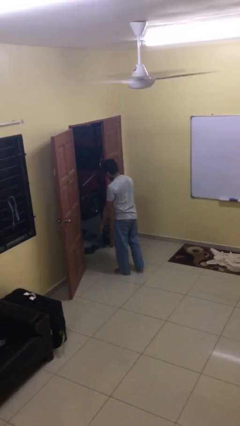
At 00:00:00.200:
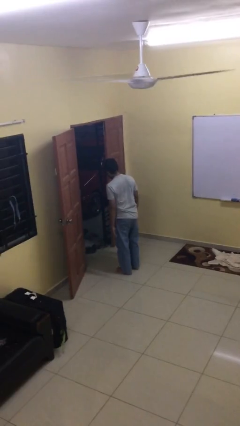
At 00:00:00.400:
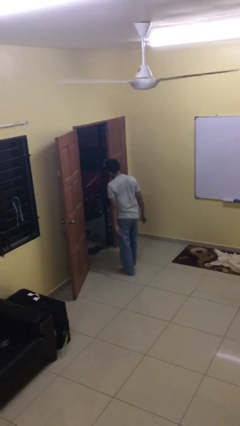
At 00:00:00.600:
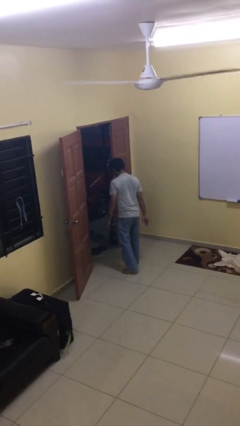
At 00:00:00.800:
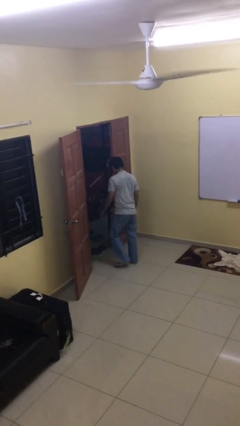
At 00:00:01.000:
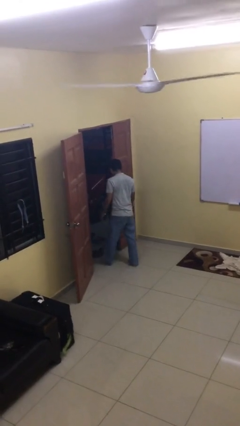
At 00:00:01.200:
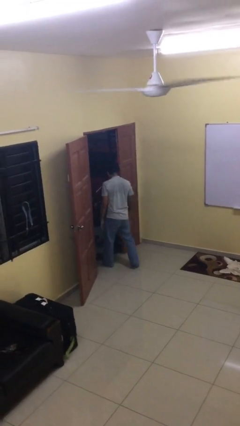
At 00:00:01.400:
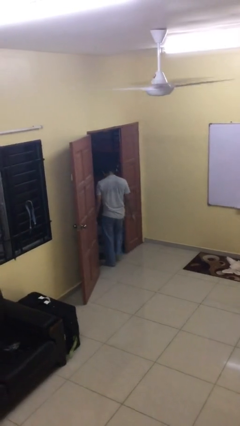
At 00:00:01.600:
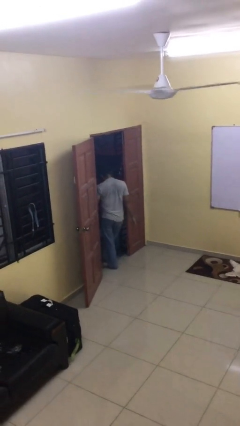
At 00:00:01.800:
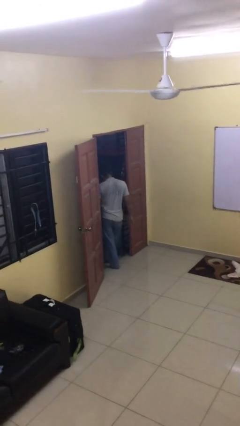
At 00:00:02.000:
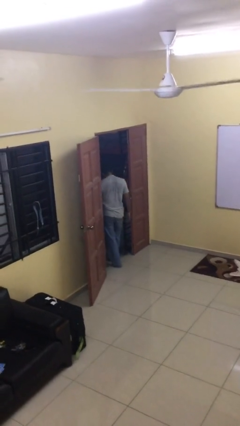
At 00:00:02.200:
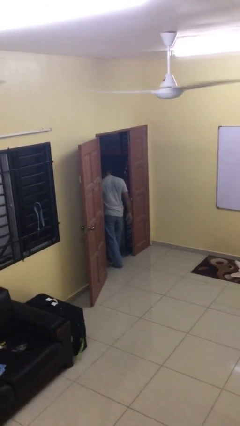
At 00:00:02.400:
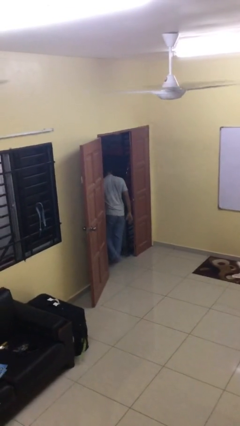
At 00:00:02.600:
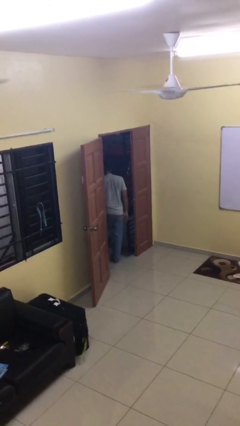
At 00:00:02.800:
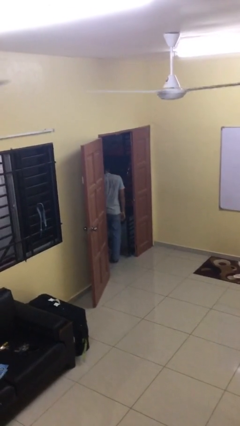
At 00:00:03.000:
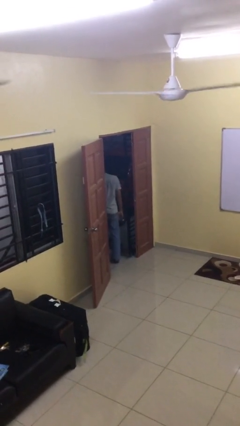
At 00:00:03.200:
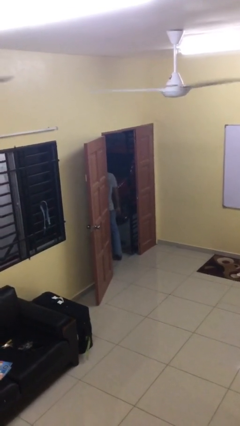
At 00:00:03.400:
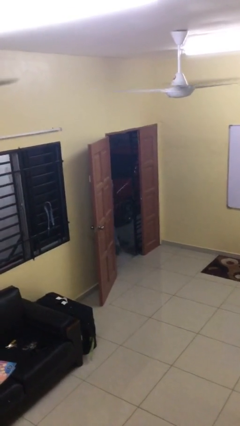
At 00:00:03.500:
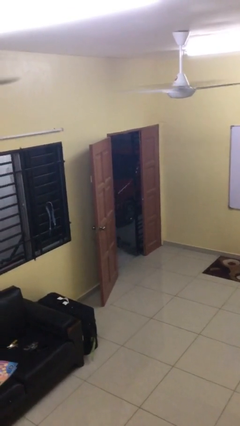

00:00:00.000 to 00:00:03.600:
person exits scene through structure

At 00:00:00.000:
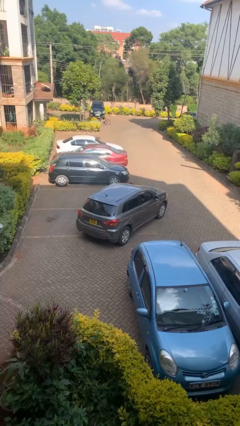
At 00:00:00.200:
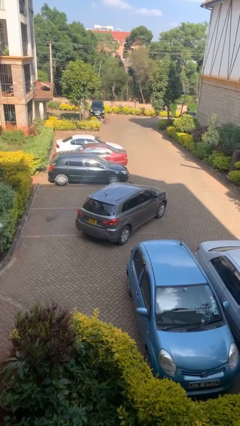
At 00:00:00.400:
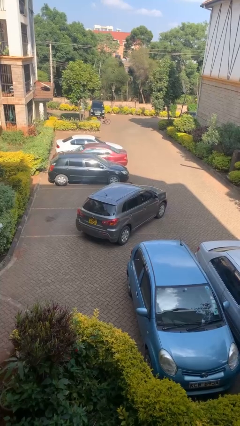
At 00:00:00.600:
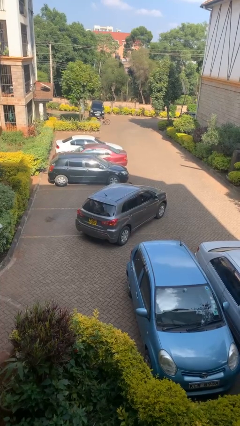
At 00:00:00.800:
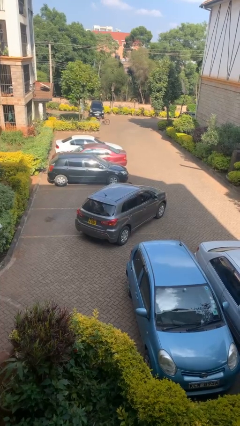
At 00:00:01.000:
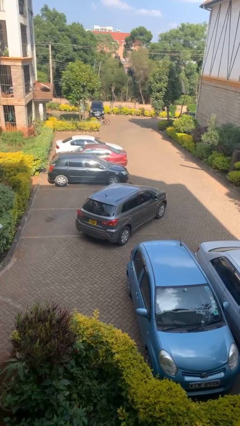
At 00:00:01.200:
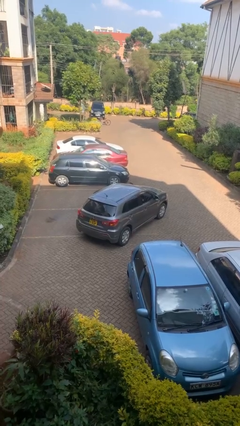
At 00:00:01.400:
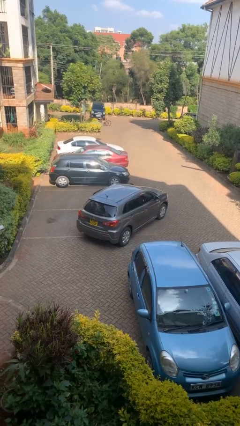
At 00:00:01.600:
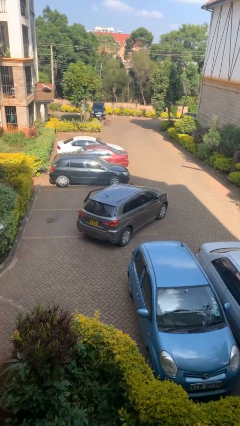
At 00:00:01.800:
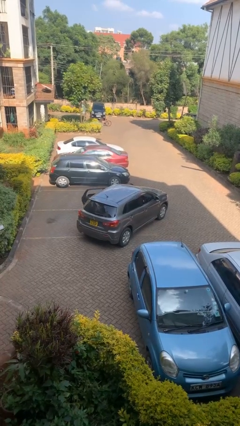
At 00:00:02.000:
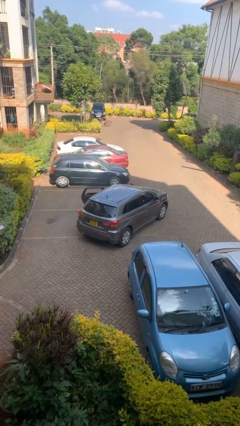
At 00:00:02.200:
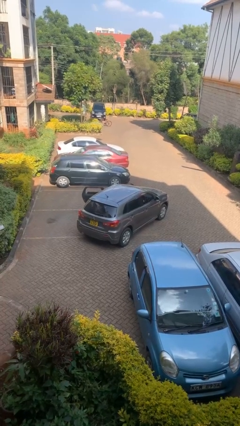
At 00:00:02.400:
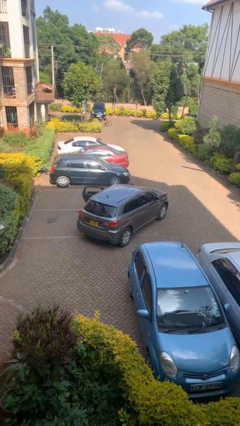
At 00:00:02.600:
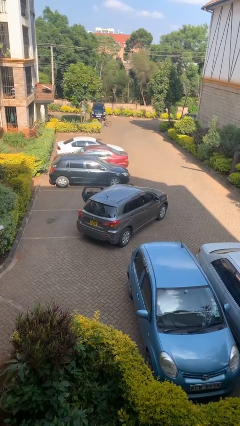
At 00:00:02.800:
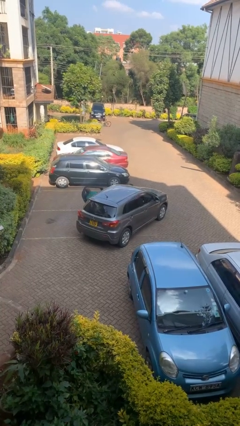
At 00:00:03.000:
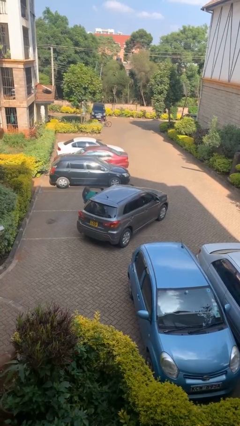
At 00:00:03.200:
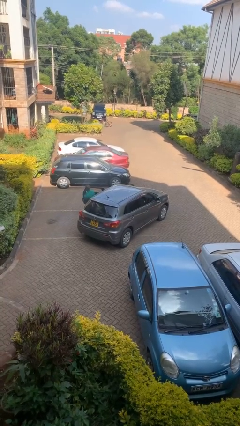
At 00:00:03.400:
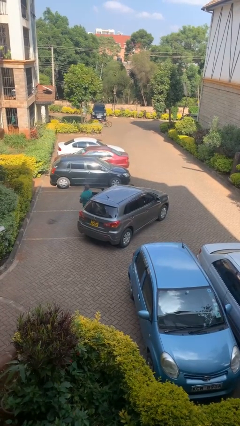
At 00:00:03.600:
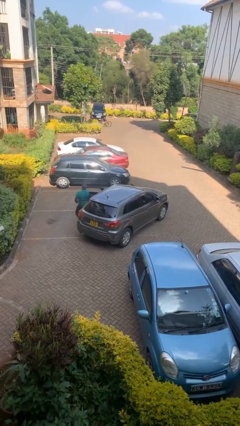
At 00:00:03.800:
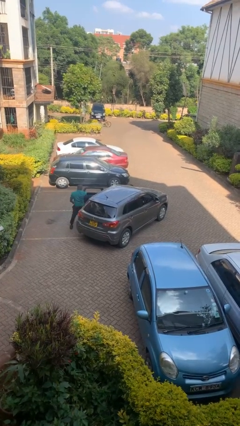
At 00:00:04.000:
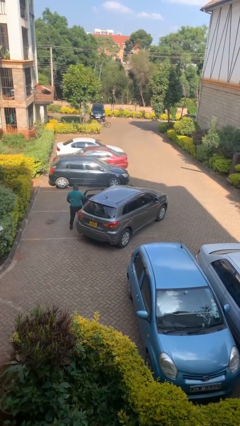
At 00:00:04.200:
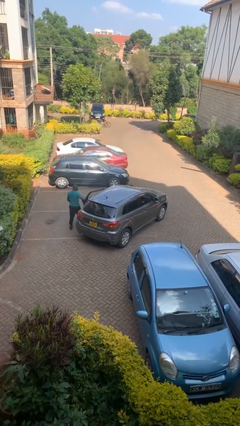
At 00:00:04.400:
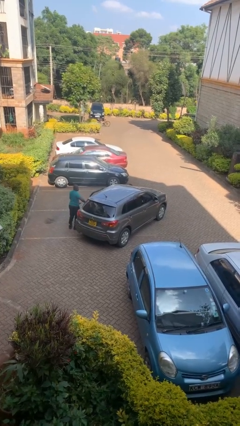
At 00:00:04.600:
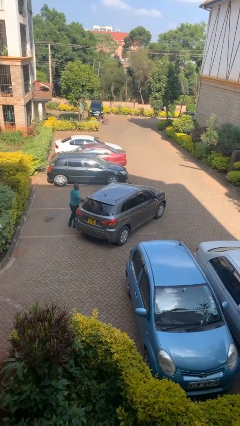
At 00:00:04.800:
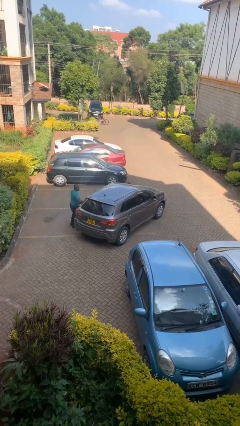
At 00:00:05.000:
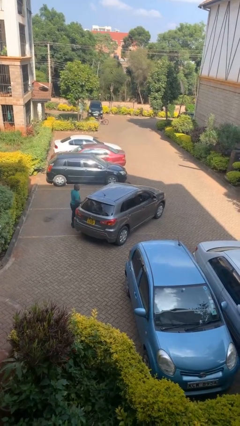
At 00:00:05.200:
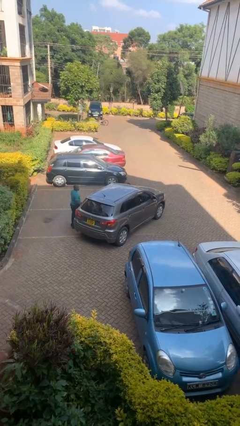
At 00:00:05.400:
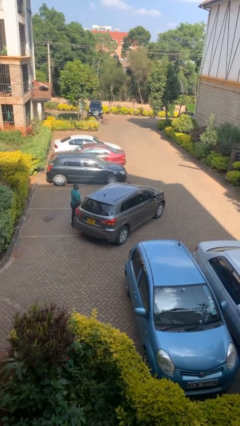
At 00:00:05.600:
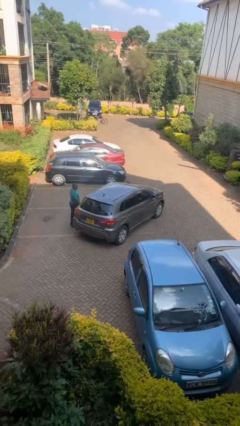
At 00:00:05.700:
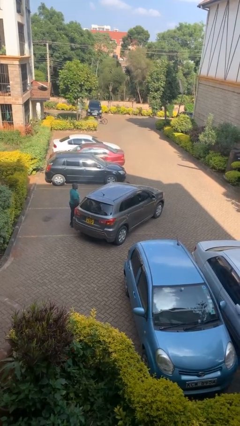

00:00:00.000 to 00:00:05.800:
car drops off person

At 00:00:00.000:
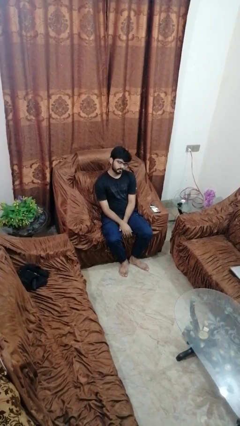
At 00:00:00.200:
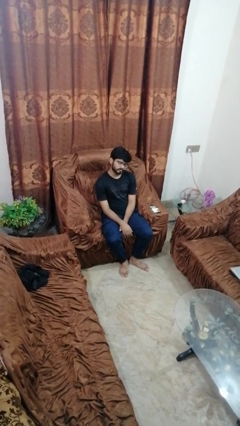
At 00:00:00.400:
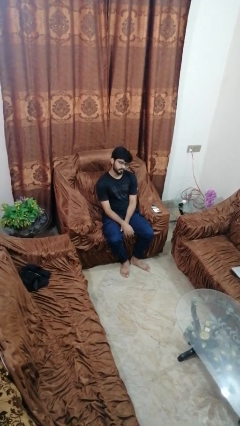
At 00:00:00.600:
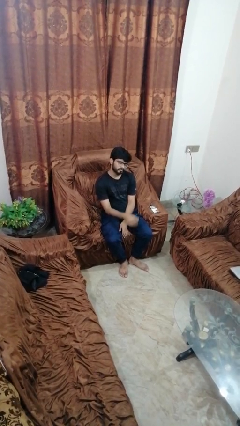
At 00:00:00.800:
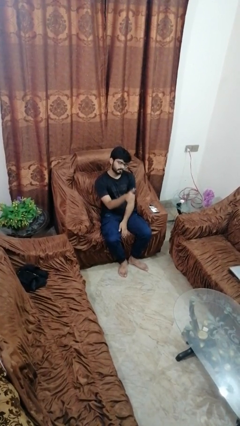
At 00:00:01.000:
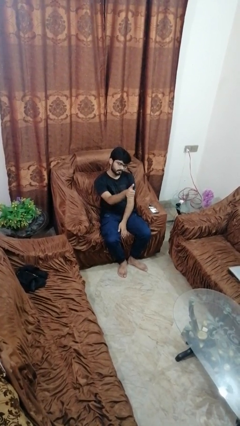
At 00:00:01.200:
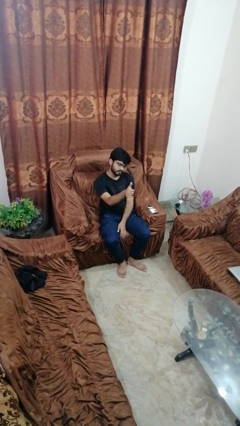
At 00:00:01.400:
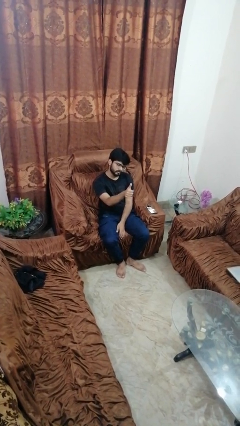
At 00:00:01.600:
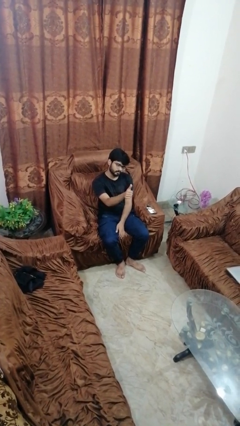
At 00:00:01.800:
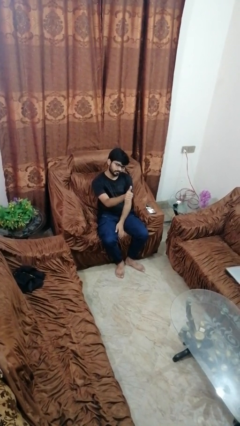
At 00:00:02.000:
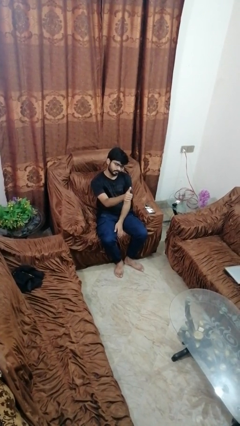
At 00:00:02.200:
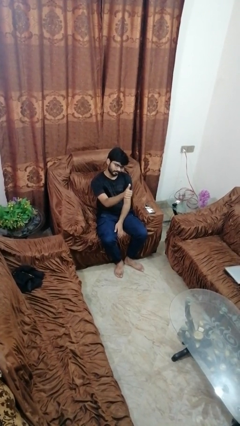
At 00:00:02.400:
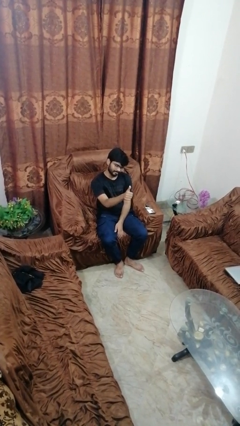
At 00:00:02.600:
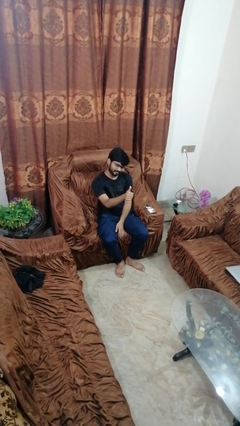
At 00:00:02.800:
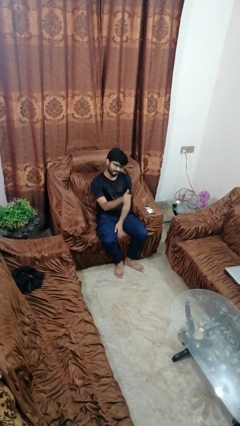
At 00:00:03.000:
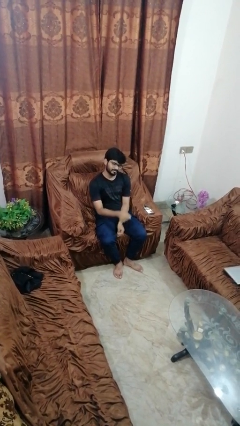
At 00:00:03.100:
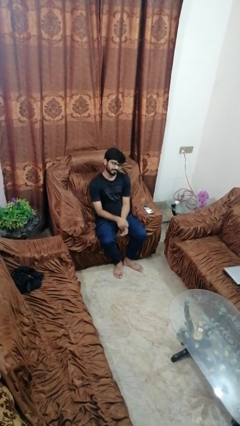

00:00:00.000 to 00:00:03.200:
person gestures thumbs up

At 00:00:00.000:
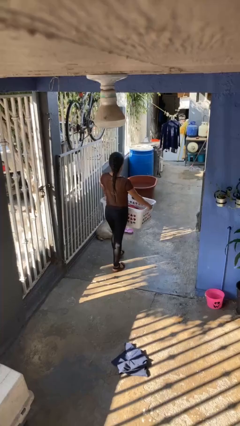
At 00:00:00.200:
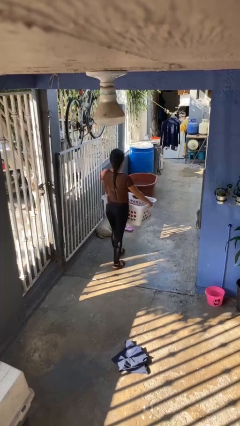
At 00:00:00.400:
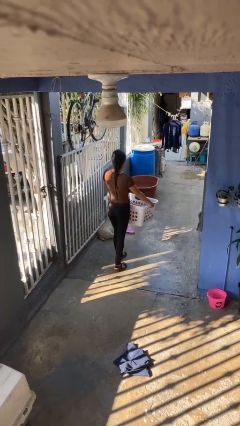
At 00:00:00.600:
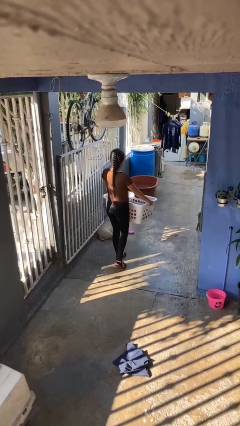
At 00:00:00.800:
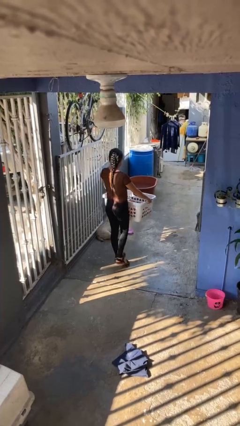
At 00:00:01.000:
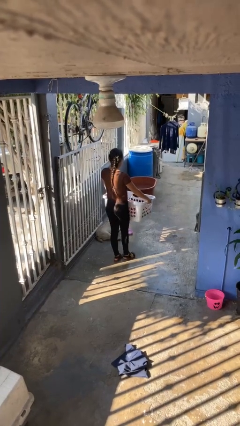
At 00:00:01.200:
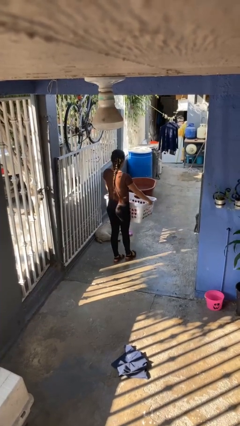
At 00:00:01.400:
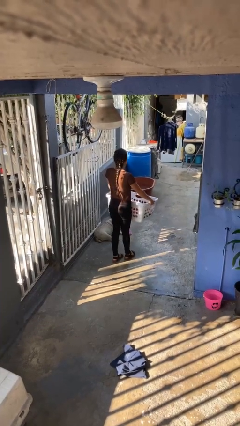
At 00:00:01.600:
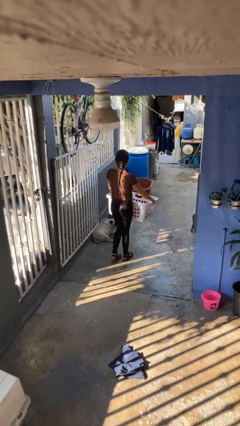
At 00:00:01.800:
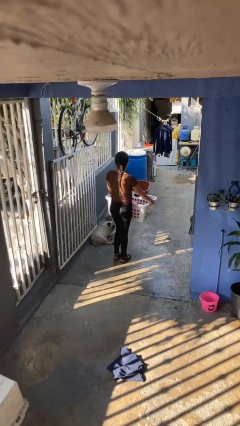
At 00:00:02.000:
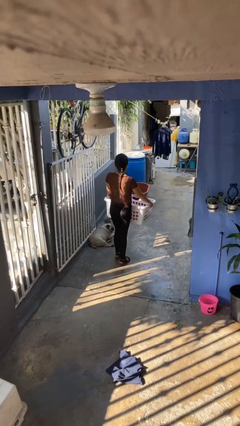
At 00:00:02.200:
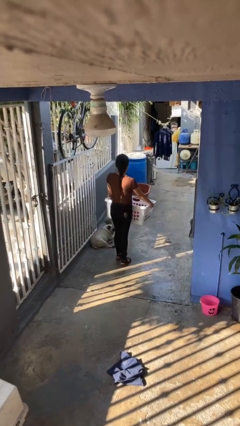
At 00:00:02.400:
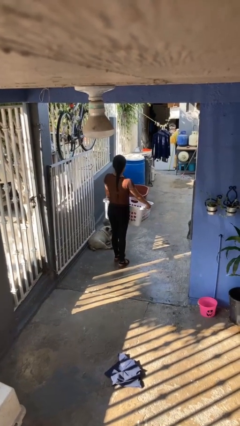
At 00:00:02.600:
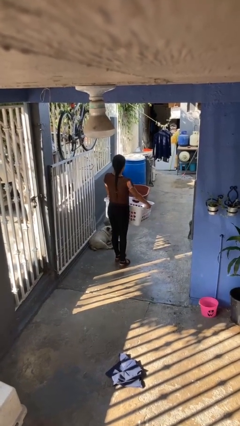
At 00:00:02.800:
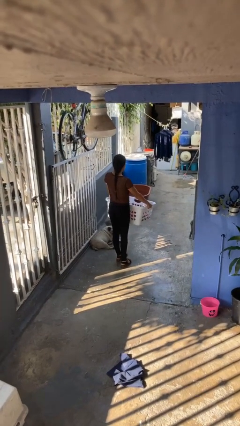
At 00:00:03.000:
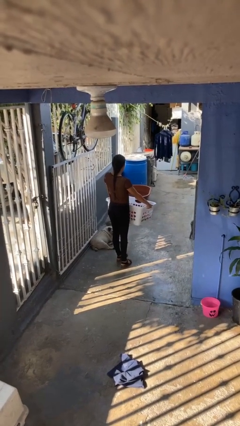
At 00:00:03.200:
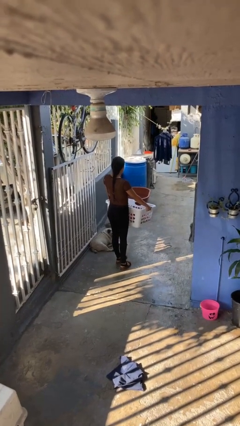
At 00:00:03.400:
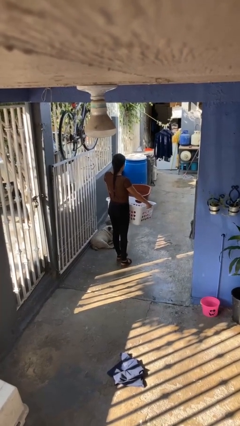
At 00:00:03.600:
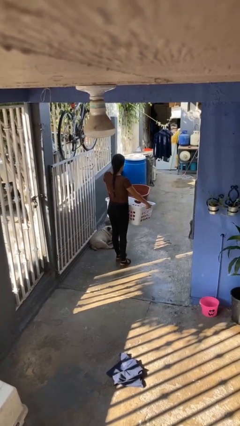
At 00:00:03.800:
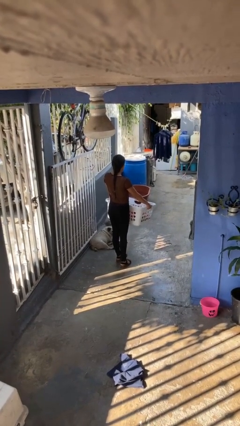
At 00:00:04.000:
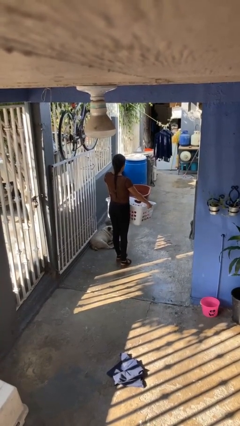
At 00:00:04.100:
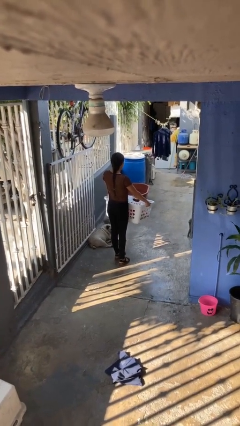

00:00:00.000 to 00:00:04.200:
person carries laundry basket

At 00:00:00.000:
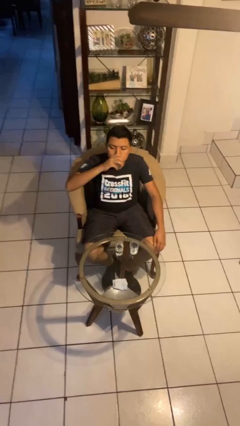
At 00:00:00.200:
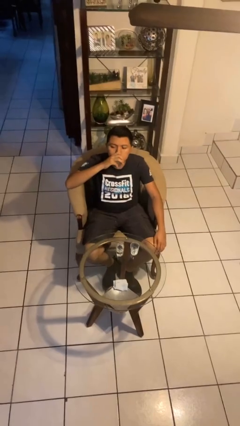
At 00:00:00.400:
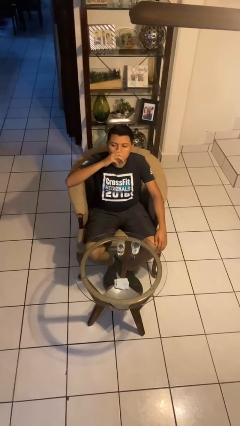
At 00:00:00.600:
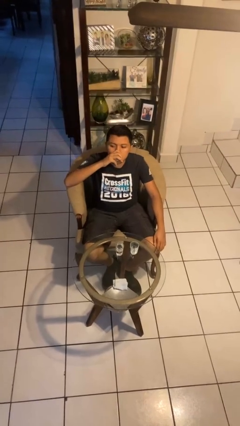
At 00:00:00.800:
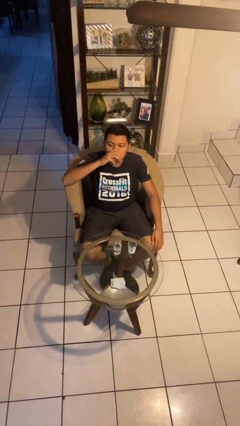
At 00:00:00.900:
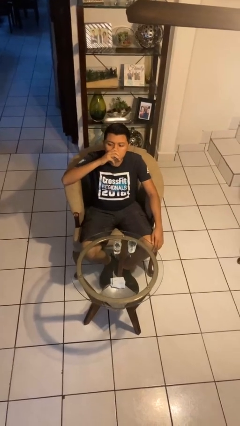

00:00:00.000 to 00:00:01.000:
person drinks from shotglass
